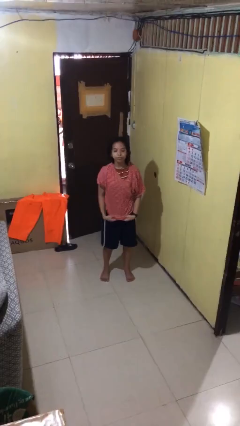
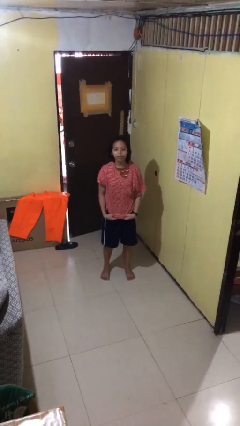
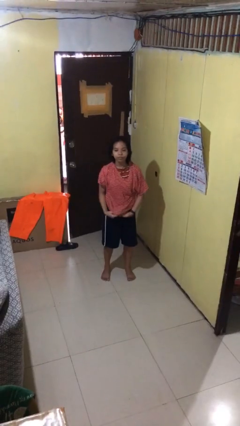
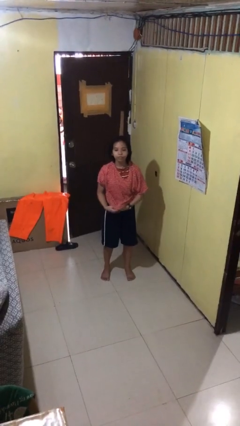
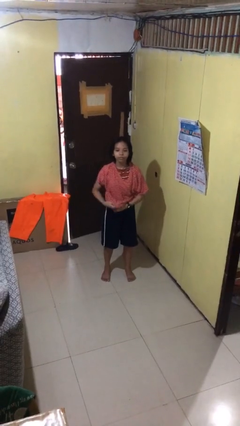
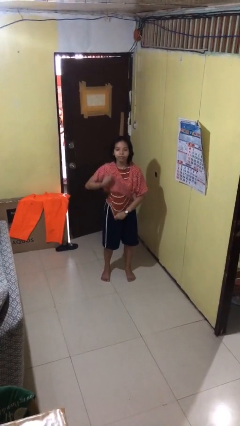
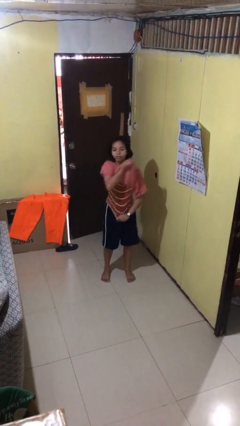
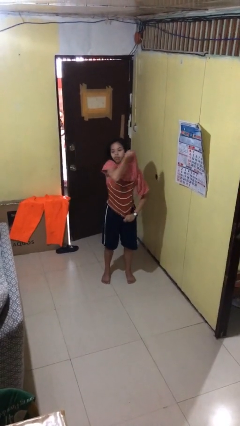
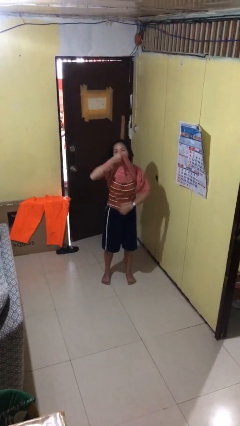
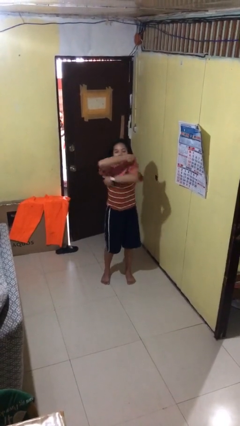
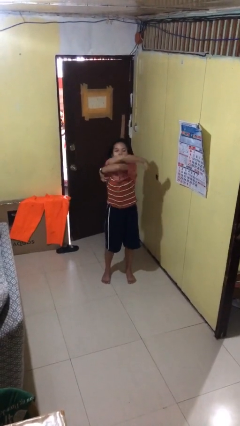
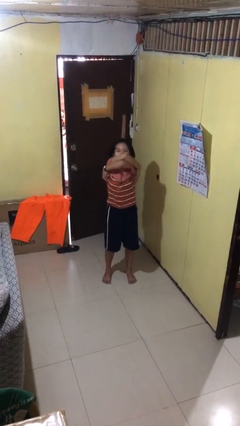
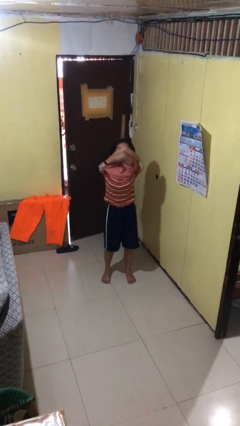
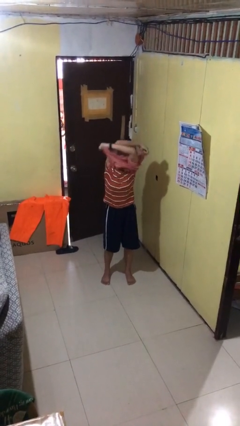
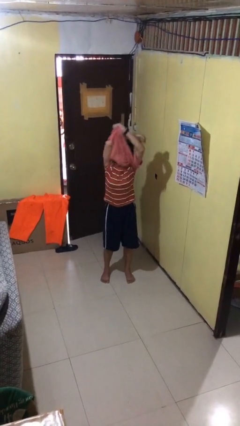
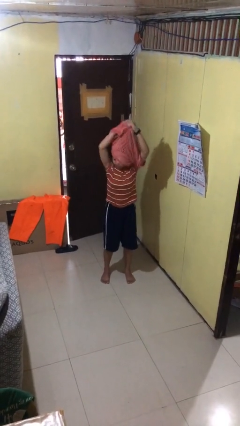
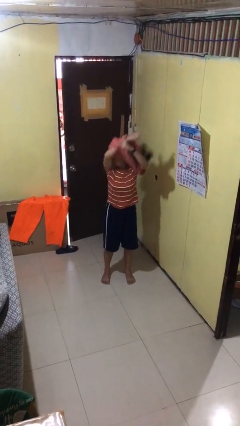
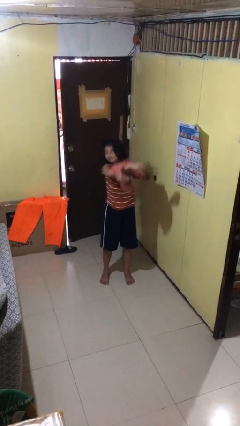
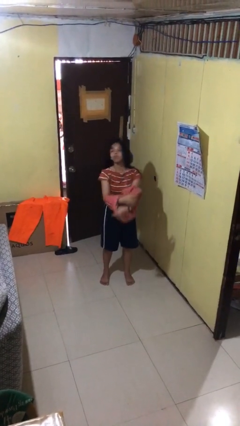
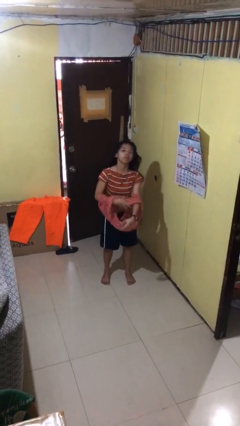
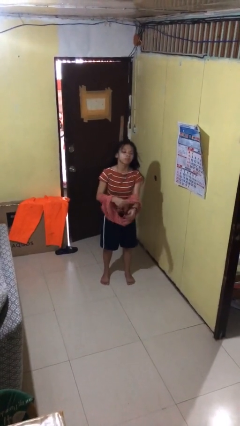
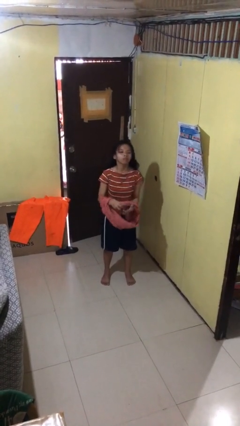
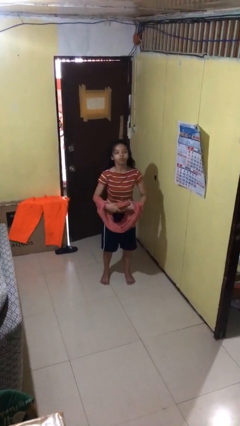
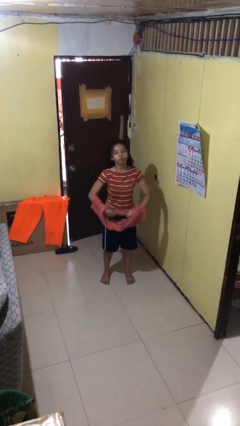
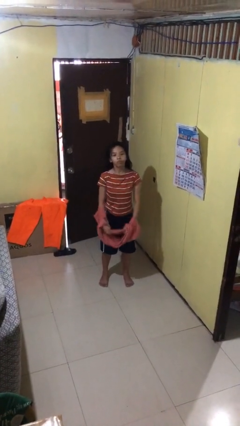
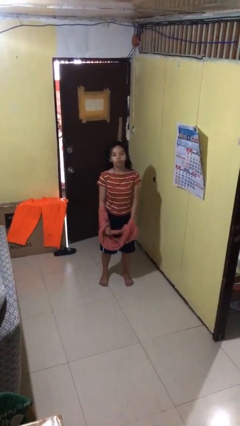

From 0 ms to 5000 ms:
person takes off shirt

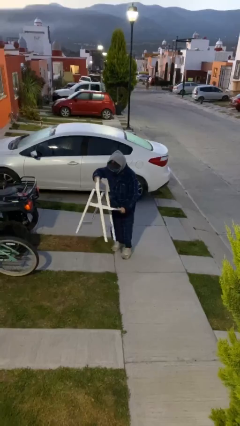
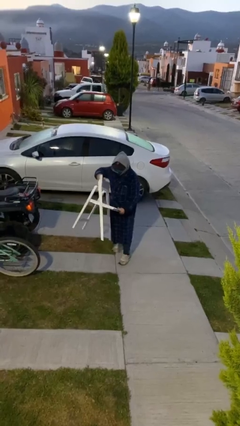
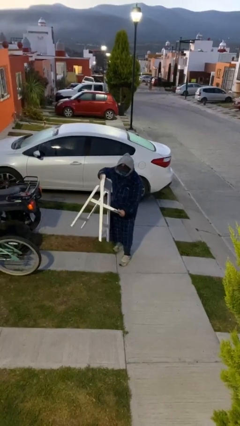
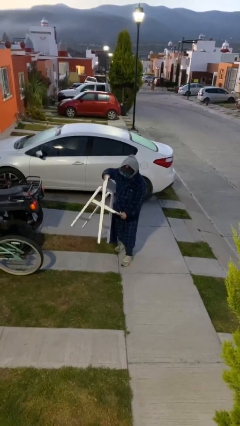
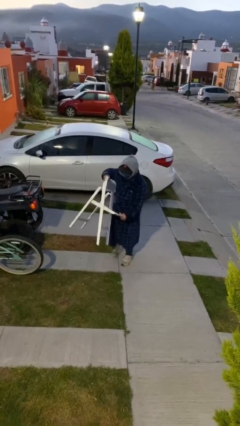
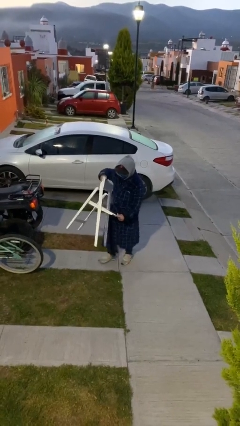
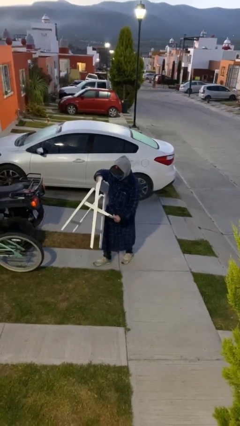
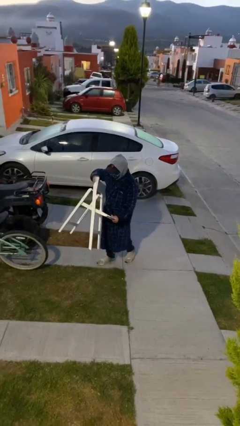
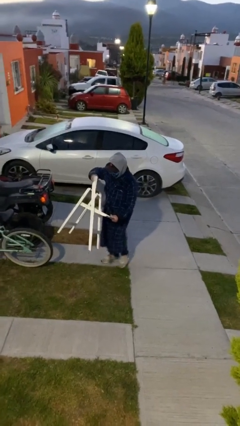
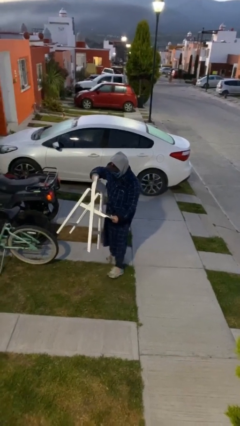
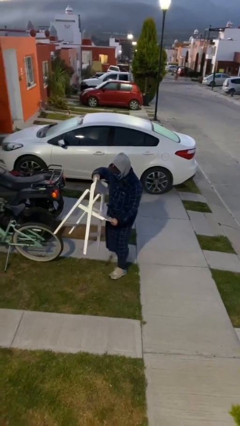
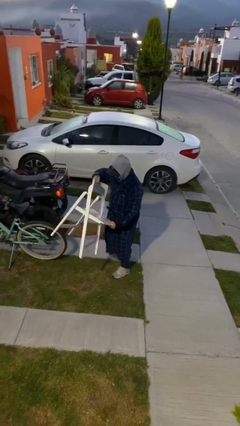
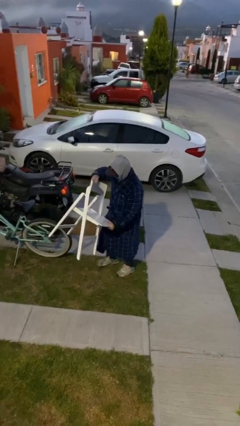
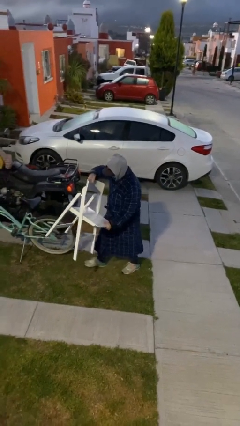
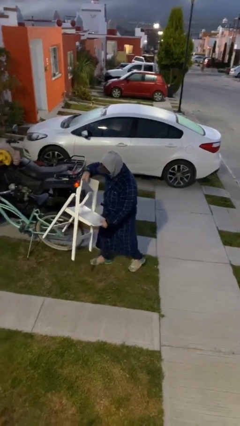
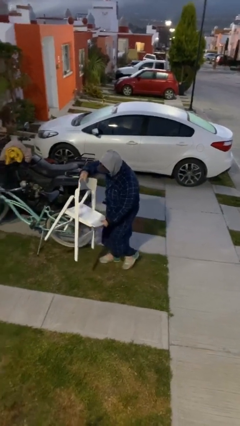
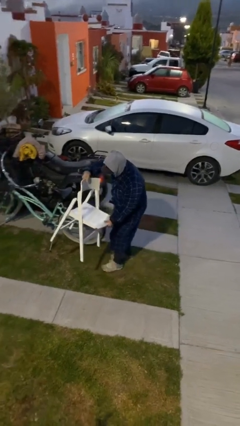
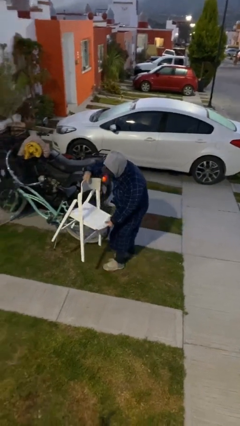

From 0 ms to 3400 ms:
person carries heavy object

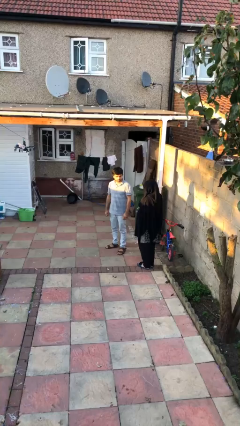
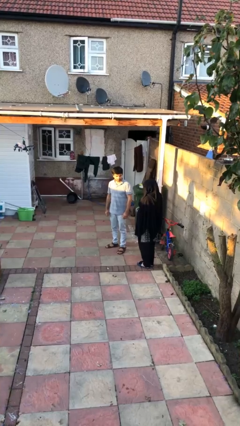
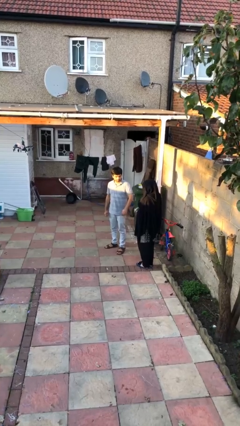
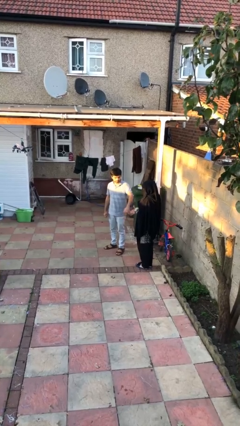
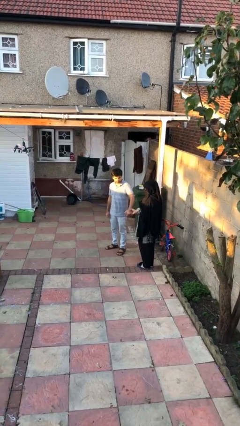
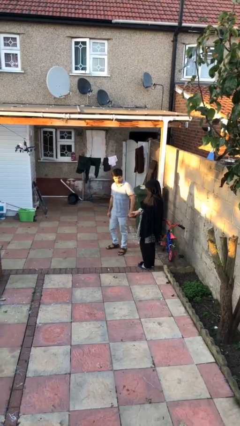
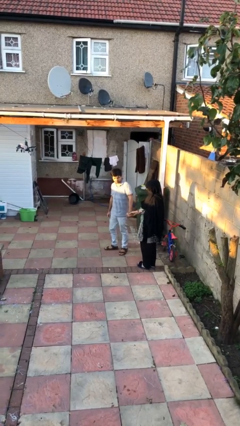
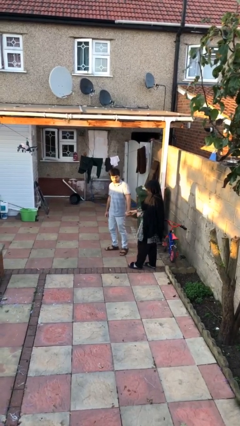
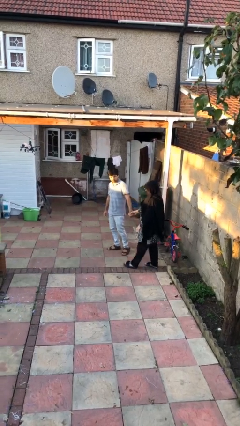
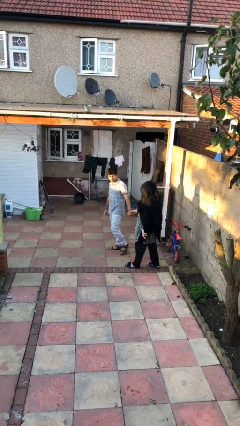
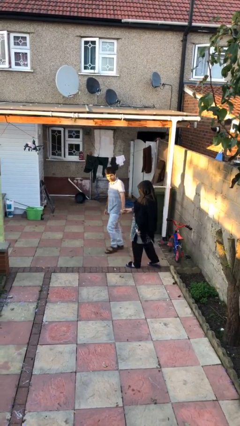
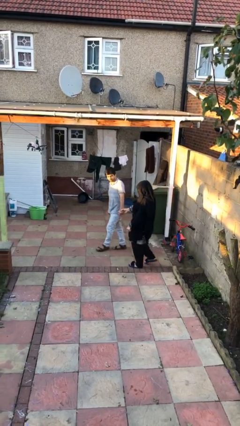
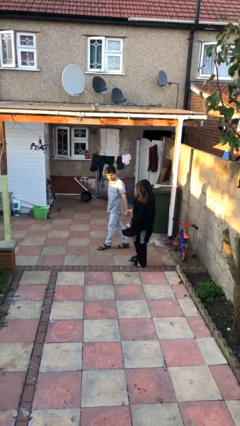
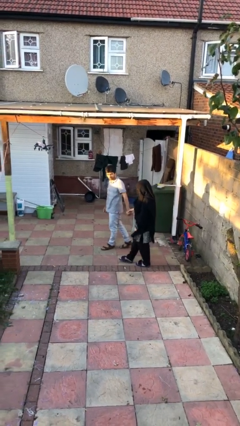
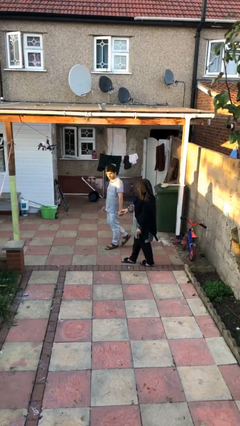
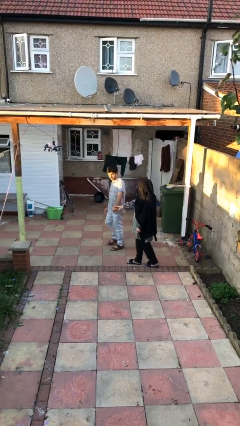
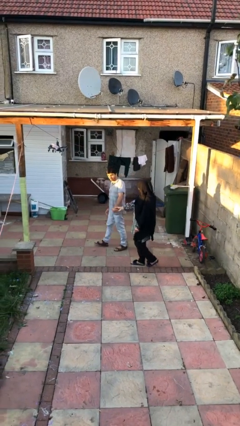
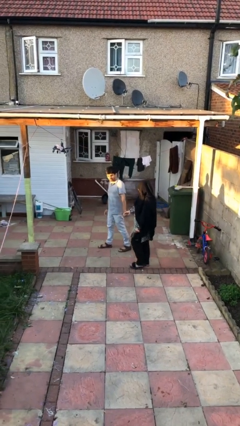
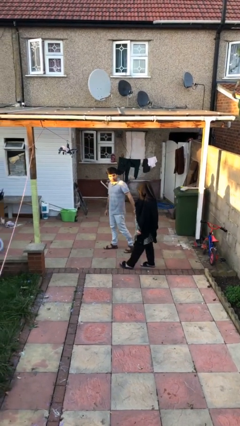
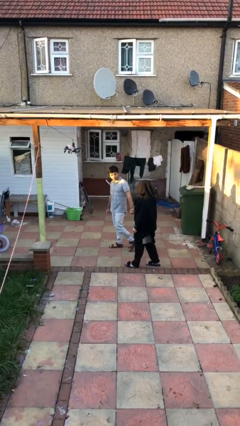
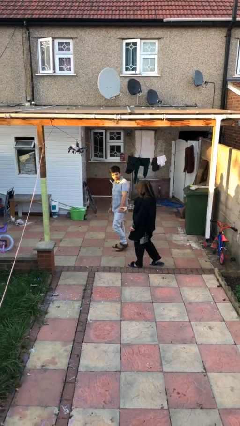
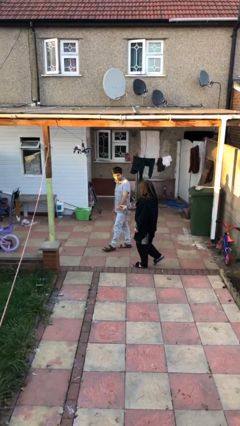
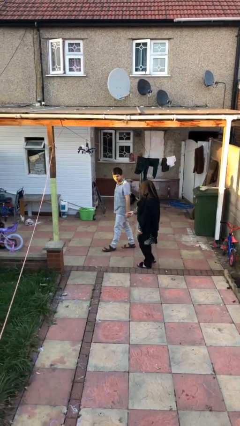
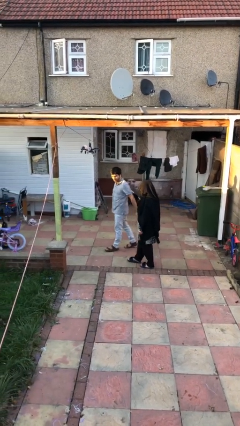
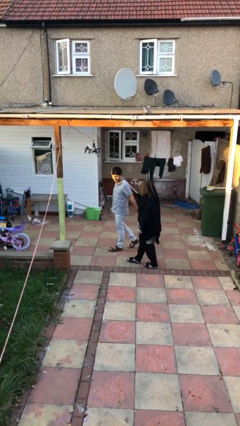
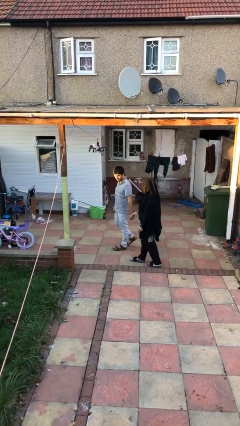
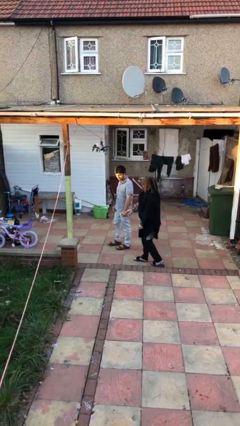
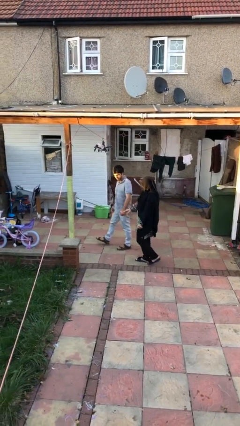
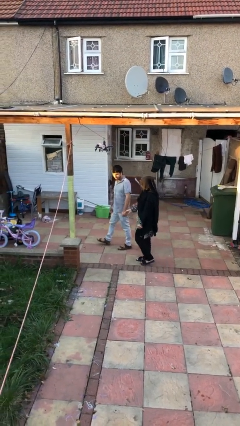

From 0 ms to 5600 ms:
person holds hand

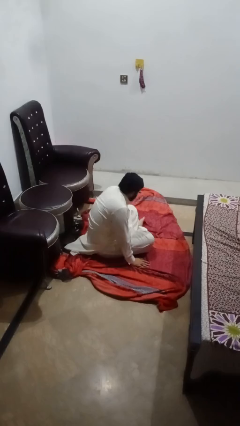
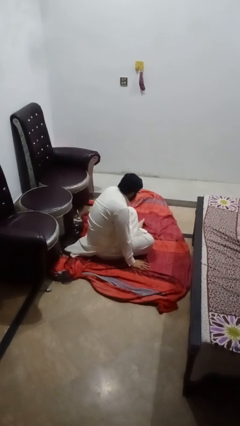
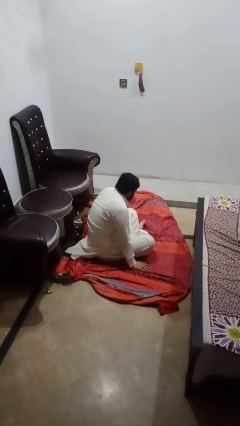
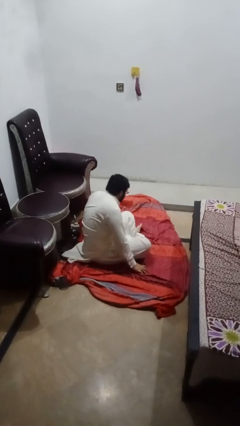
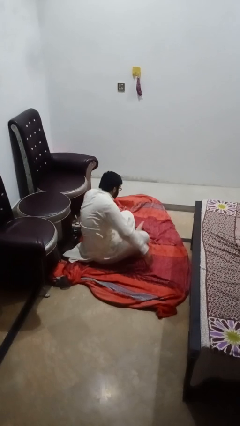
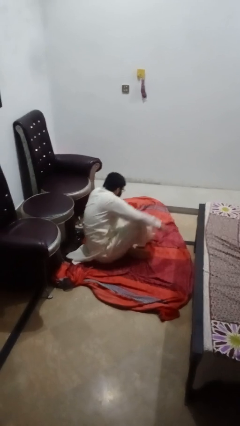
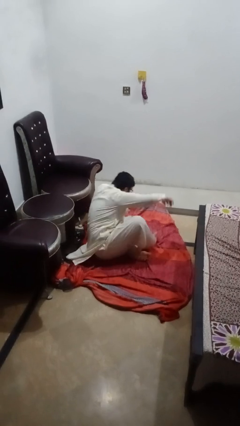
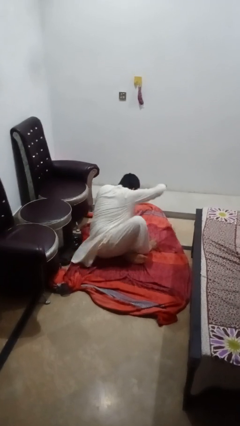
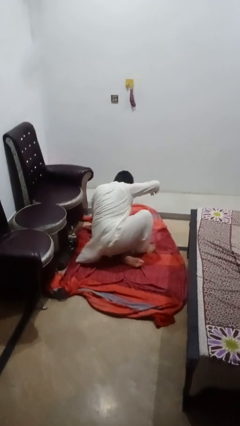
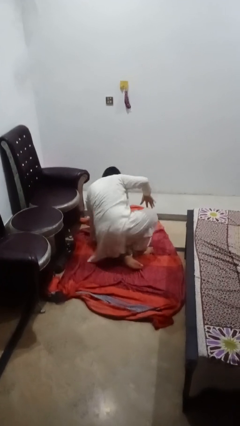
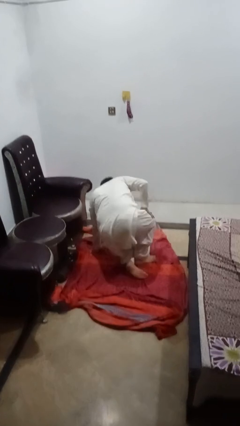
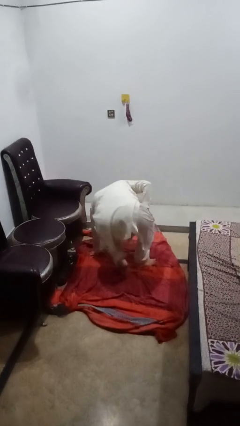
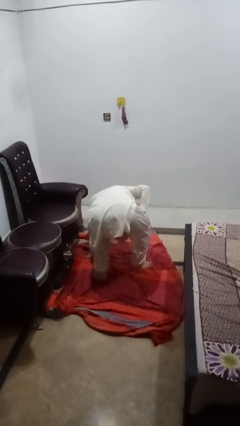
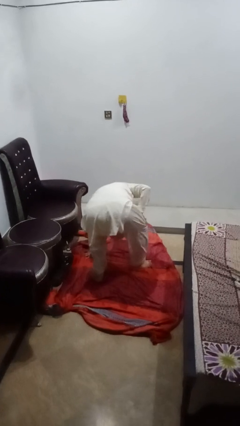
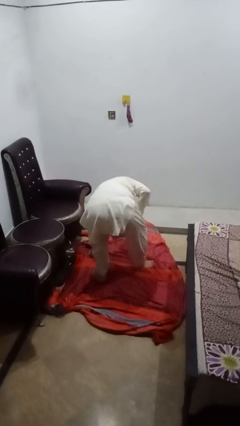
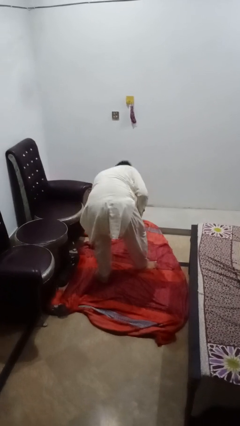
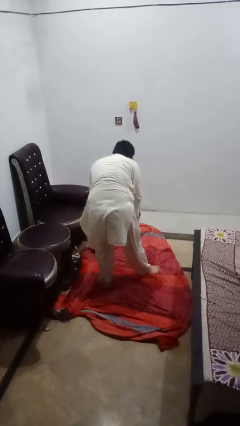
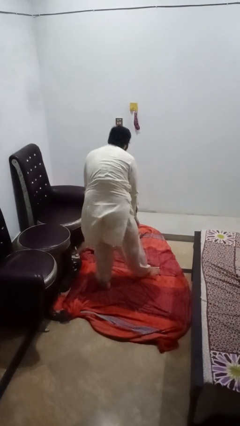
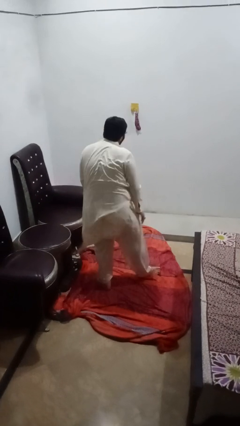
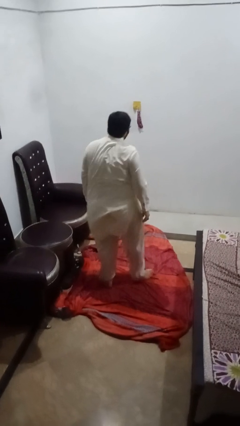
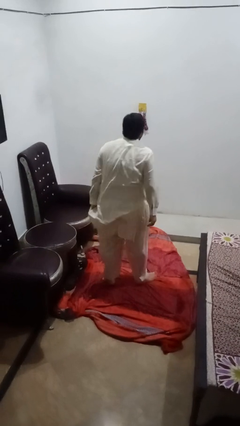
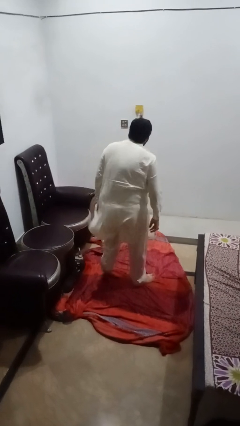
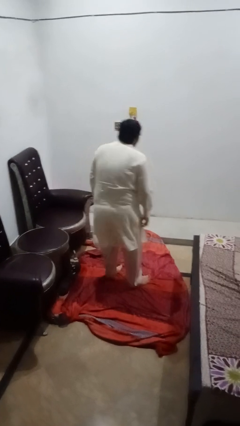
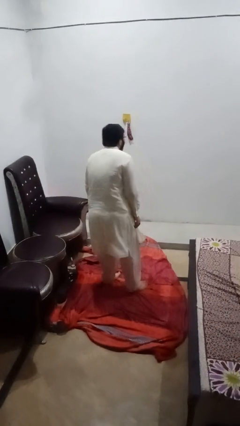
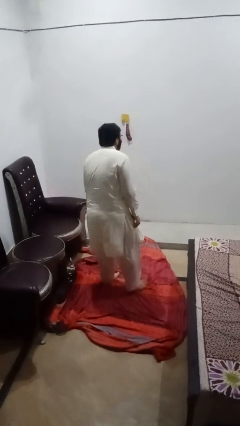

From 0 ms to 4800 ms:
person stands up from floor
